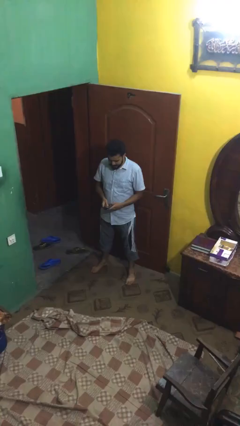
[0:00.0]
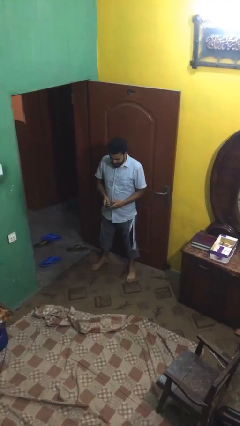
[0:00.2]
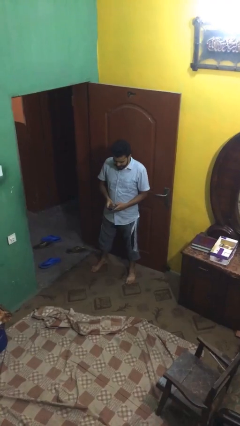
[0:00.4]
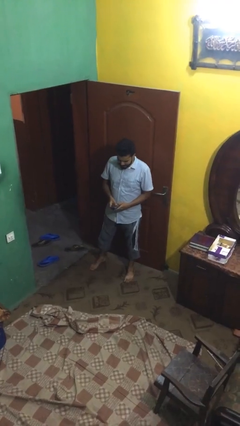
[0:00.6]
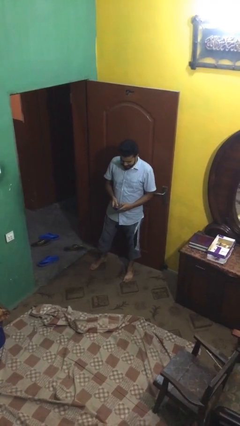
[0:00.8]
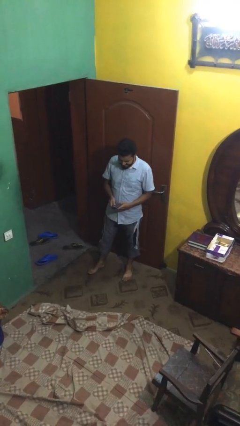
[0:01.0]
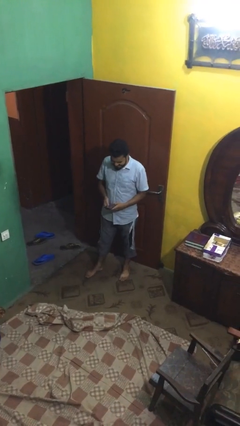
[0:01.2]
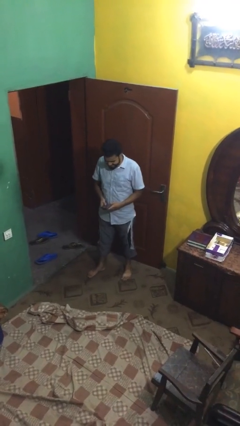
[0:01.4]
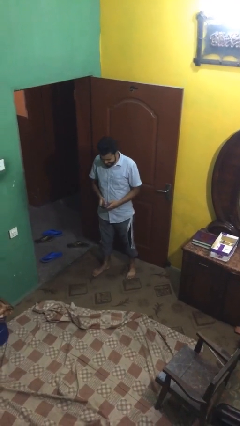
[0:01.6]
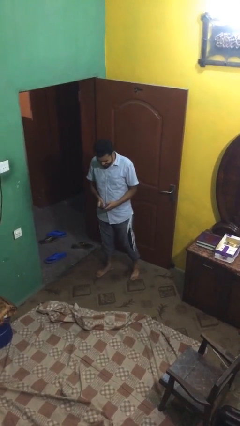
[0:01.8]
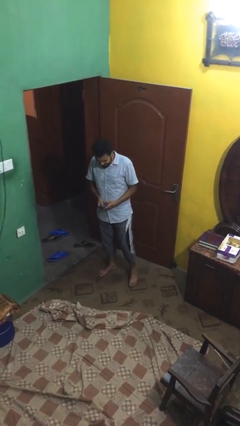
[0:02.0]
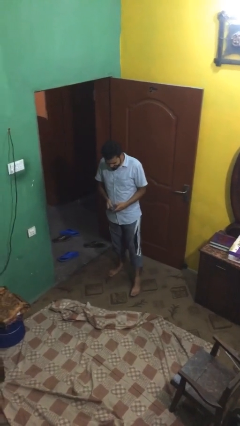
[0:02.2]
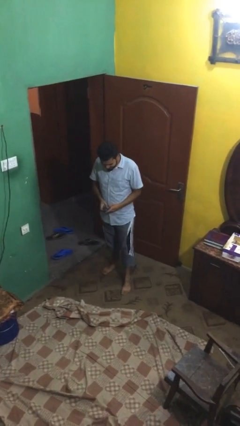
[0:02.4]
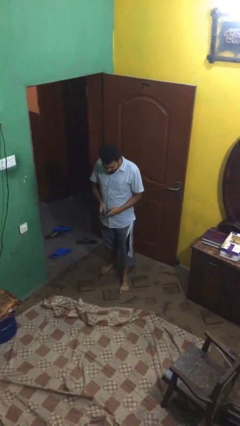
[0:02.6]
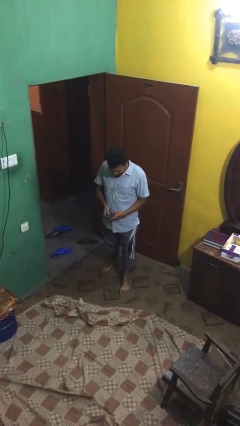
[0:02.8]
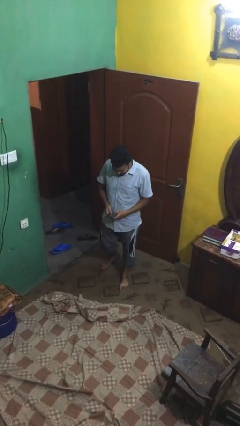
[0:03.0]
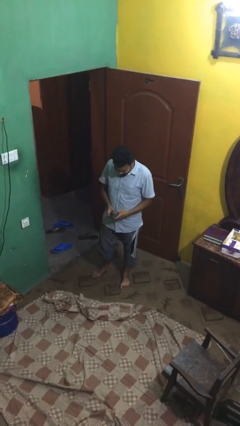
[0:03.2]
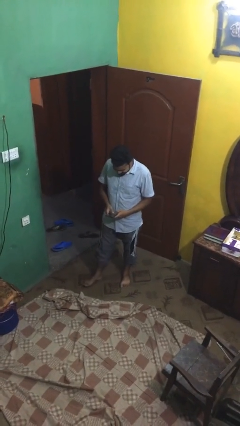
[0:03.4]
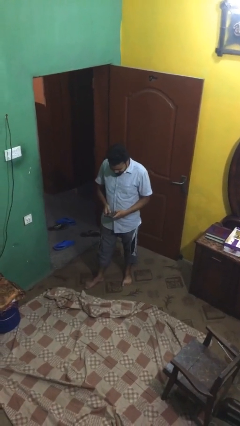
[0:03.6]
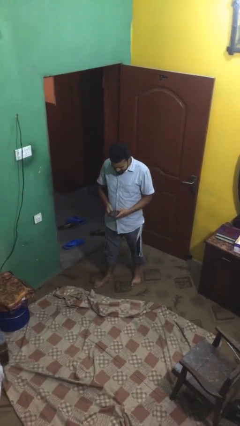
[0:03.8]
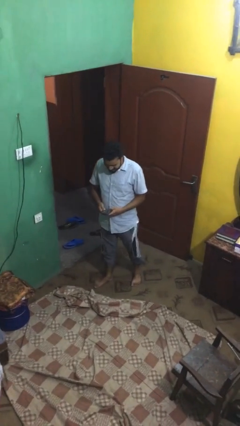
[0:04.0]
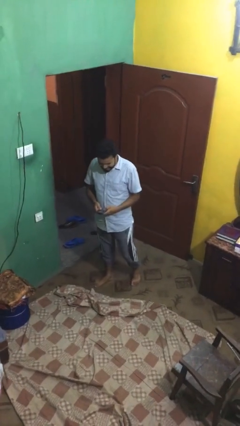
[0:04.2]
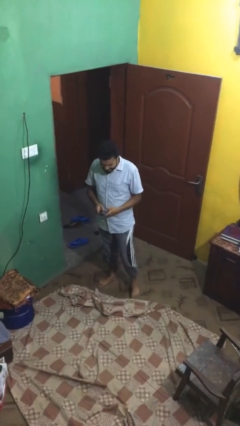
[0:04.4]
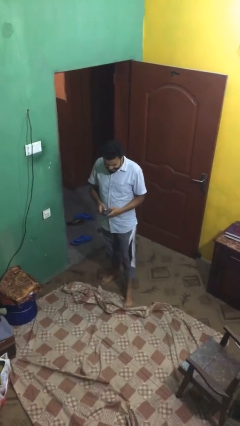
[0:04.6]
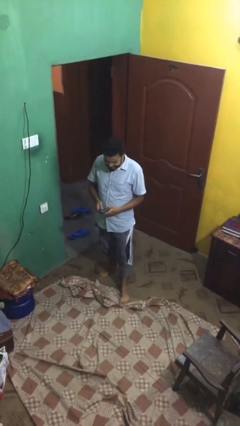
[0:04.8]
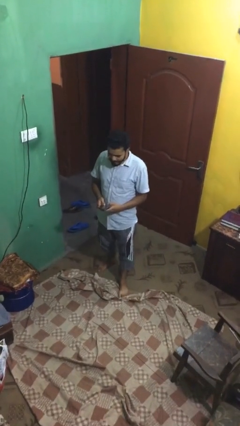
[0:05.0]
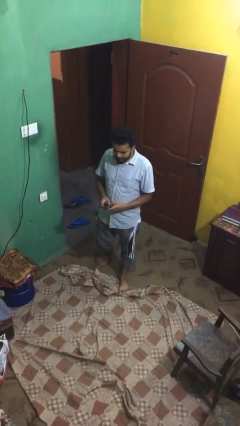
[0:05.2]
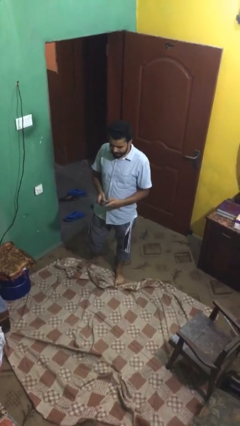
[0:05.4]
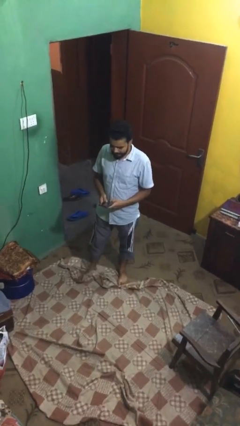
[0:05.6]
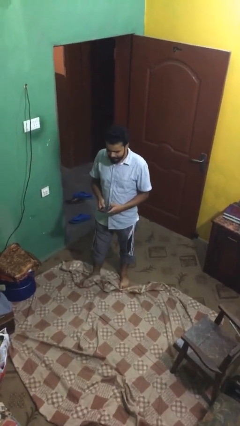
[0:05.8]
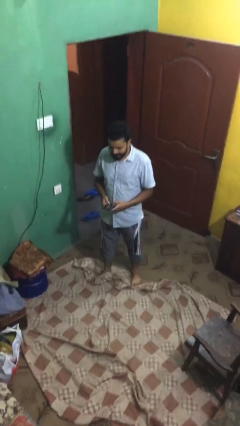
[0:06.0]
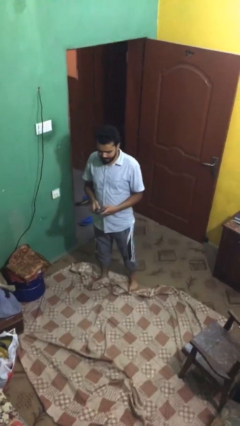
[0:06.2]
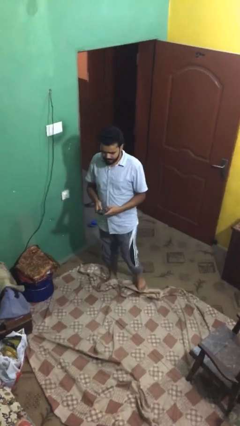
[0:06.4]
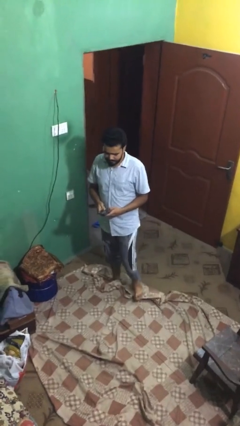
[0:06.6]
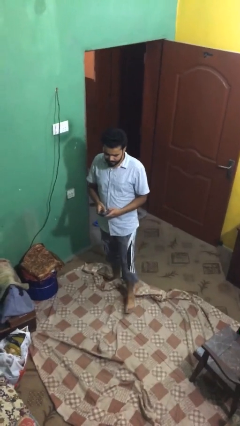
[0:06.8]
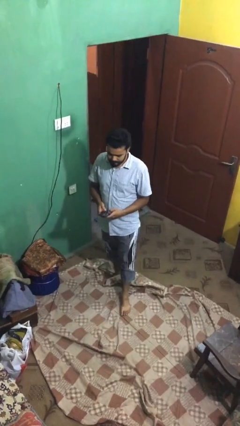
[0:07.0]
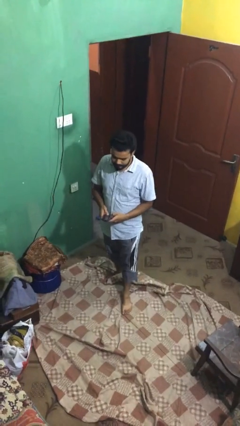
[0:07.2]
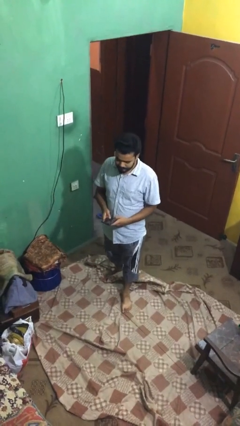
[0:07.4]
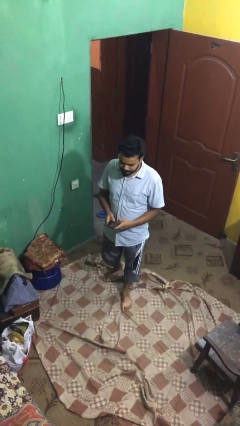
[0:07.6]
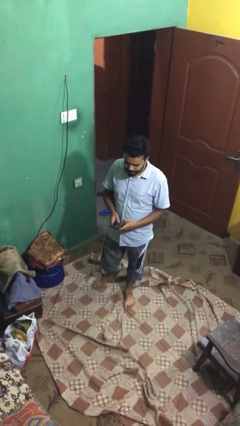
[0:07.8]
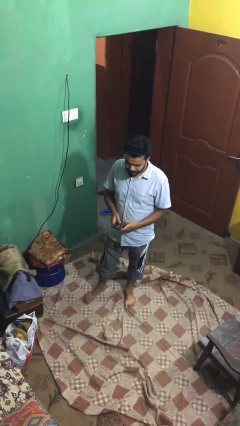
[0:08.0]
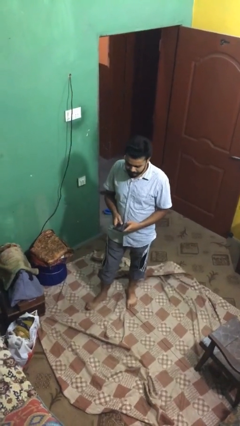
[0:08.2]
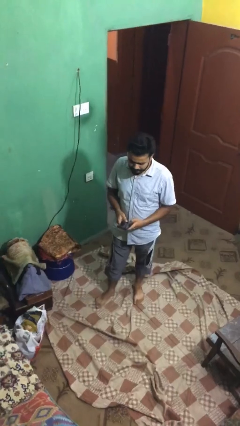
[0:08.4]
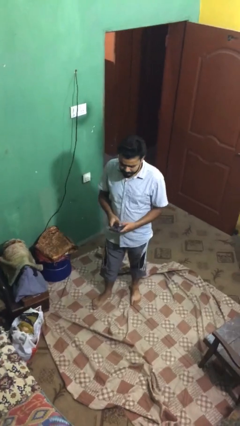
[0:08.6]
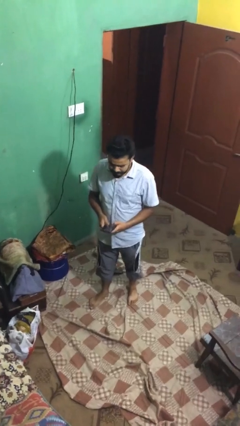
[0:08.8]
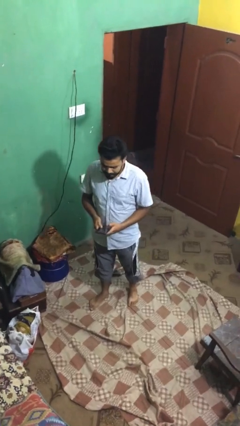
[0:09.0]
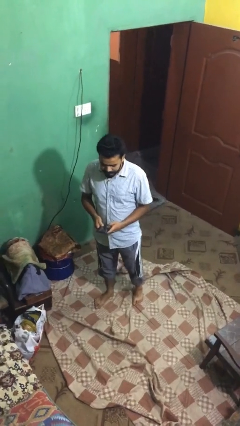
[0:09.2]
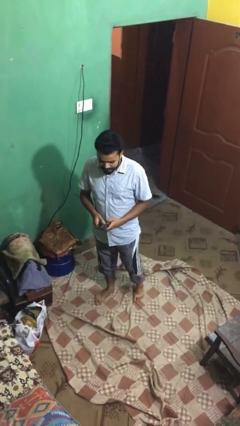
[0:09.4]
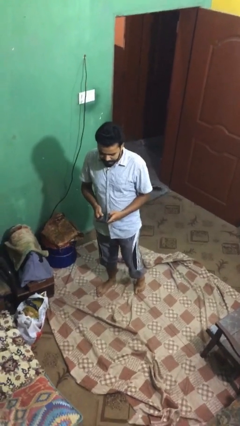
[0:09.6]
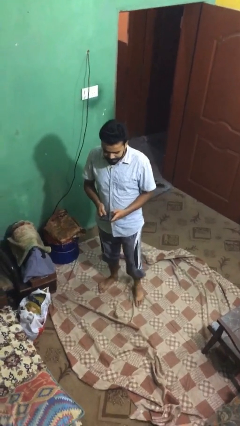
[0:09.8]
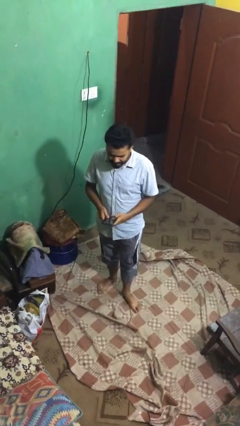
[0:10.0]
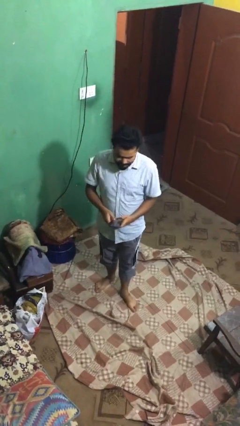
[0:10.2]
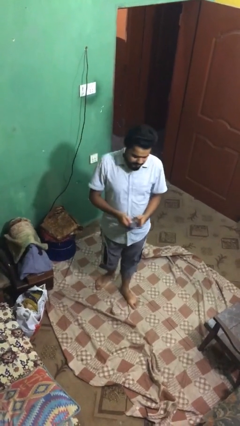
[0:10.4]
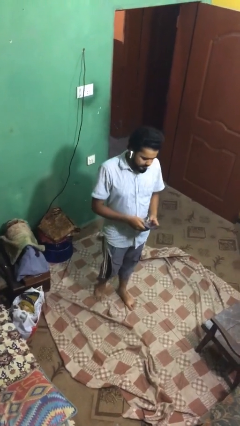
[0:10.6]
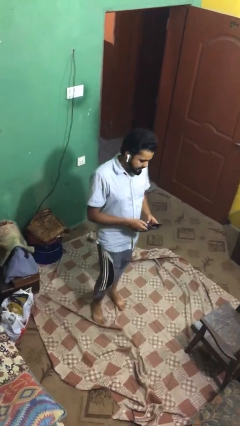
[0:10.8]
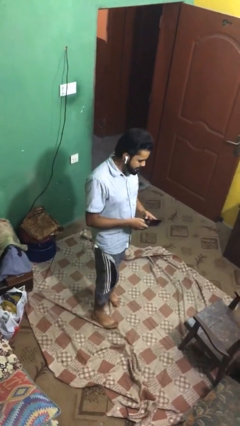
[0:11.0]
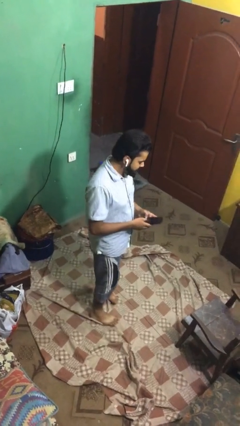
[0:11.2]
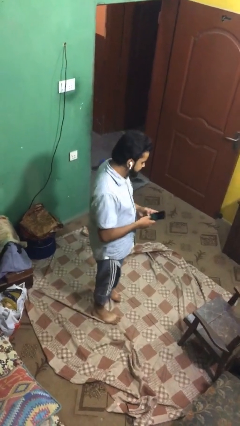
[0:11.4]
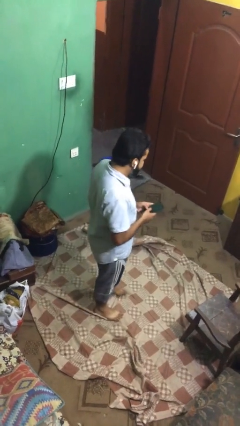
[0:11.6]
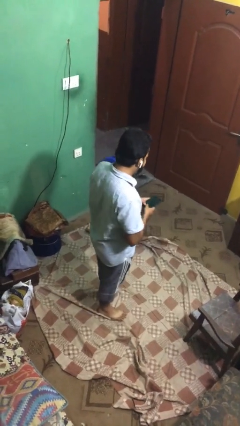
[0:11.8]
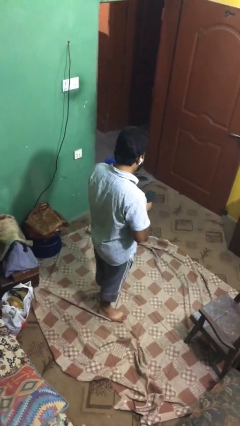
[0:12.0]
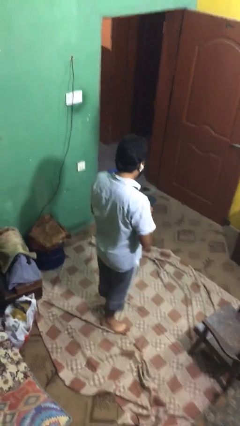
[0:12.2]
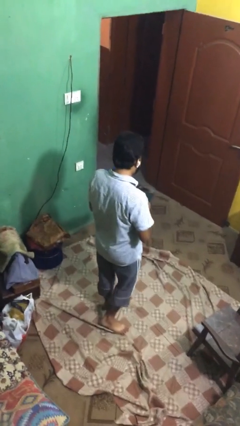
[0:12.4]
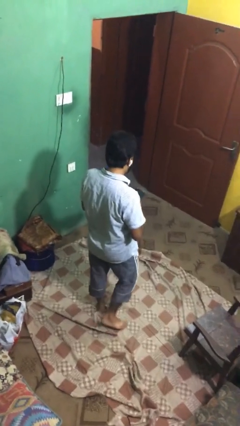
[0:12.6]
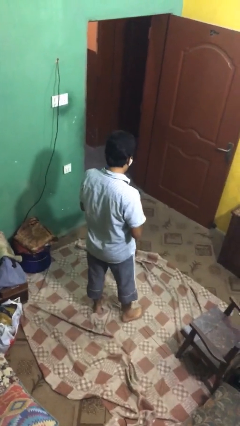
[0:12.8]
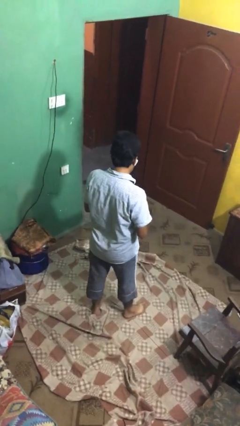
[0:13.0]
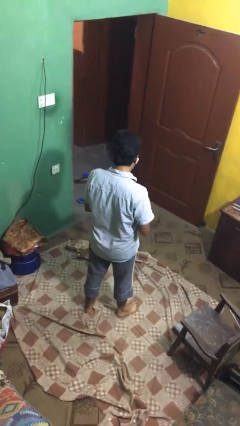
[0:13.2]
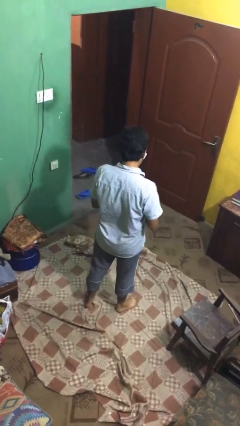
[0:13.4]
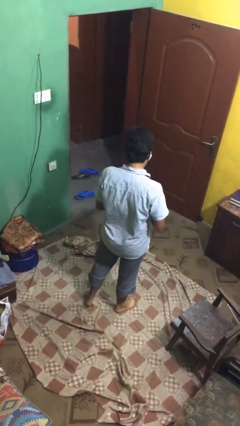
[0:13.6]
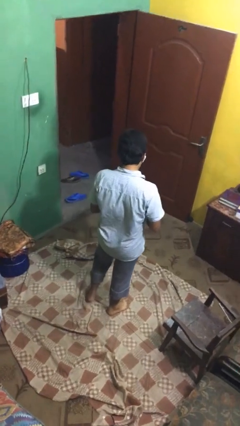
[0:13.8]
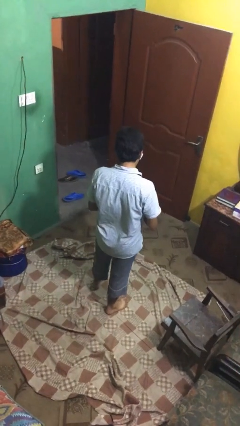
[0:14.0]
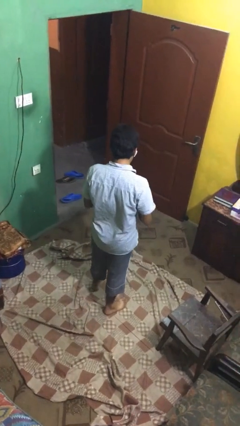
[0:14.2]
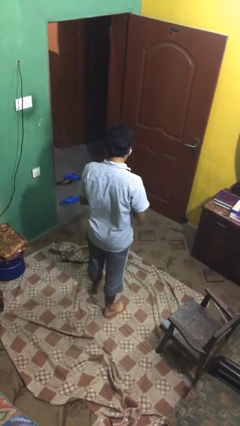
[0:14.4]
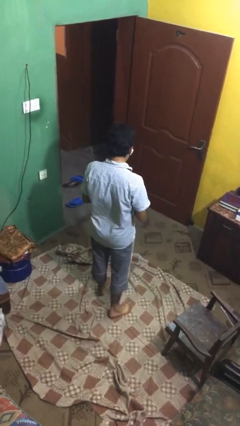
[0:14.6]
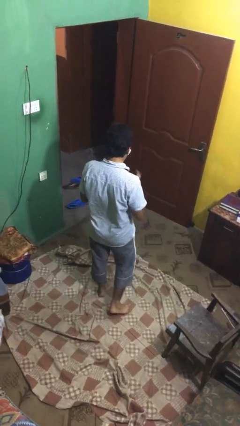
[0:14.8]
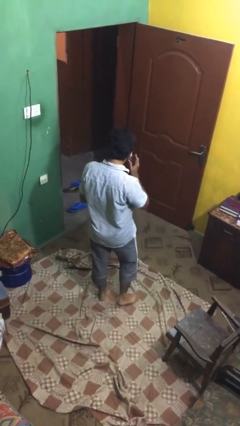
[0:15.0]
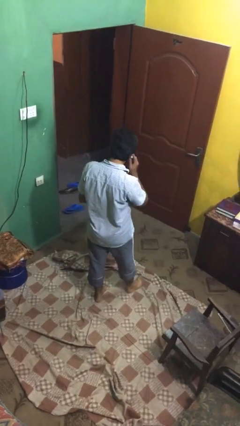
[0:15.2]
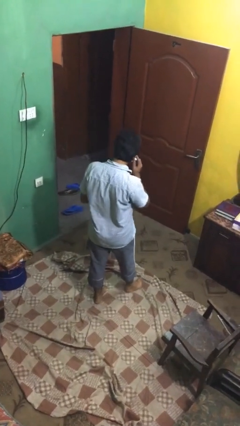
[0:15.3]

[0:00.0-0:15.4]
person texts on phone

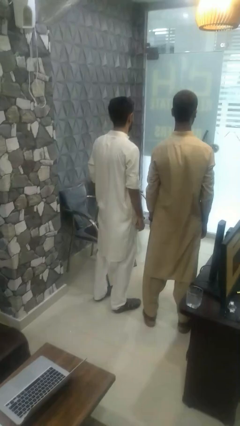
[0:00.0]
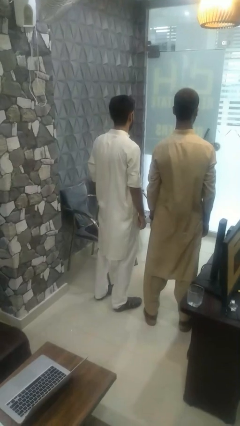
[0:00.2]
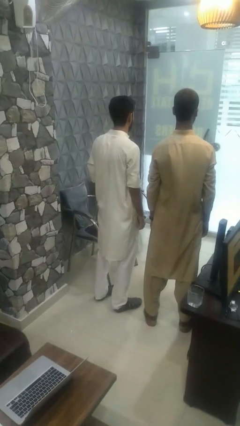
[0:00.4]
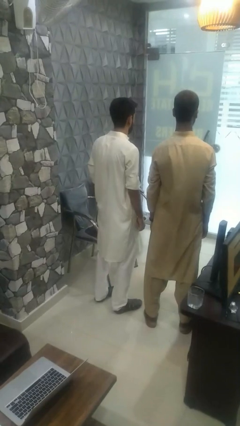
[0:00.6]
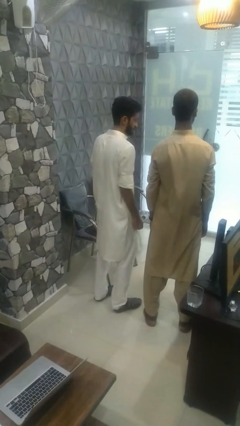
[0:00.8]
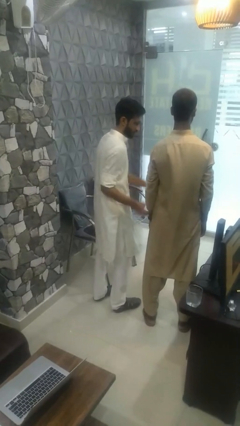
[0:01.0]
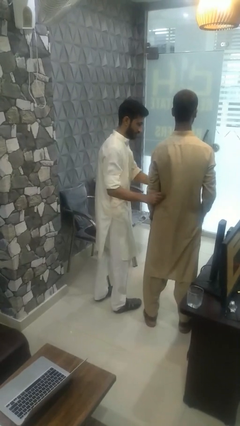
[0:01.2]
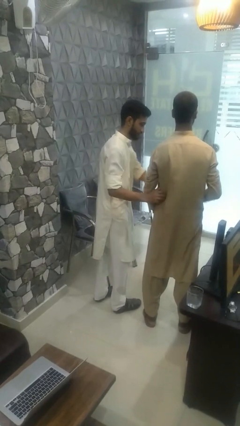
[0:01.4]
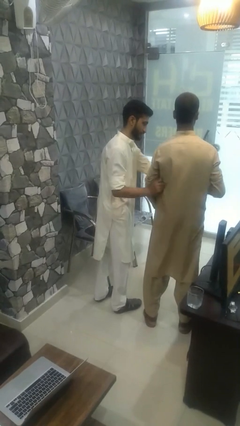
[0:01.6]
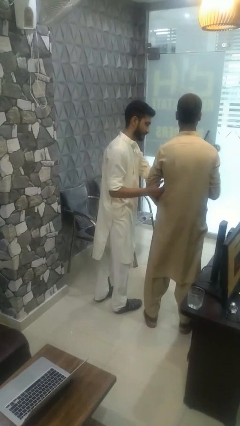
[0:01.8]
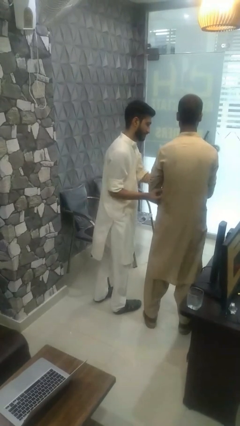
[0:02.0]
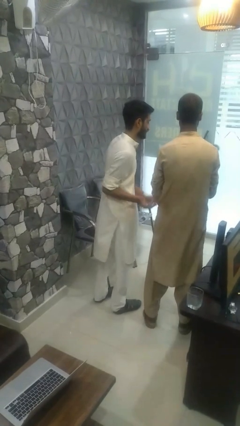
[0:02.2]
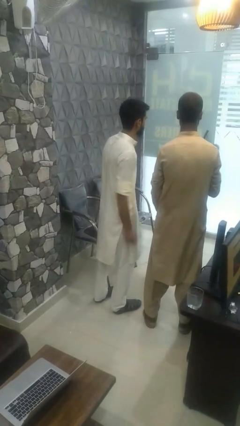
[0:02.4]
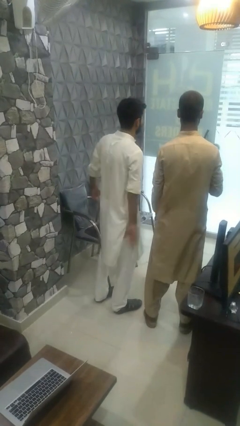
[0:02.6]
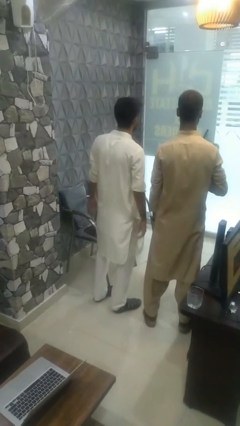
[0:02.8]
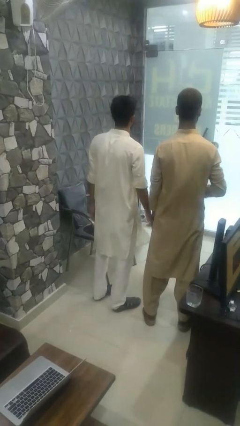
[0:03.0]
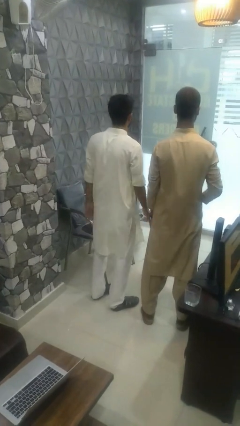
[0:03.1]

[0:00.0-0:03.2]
person tickles person
